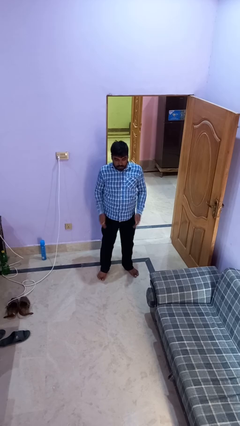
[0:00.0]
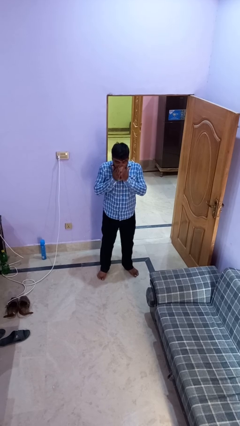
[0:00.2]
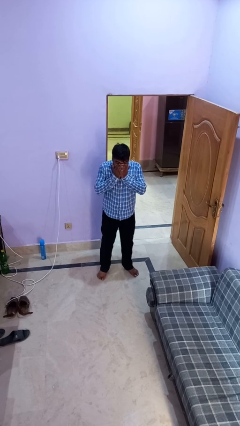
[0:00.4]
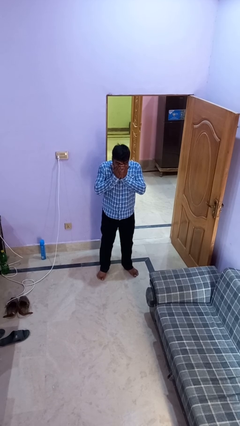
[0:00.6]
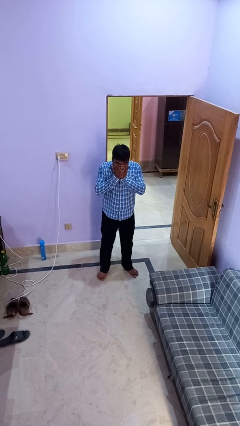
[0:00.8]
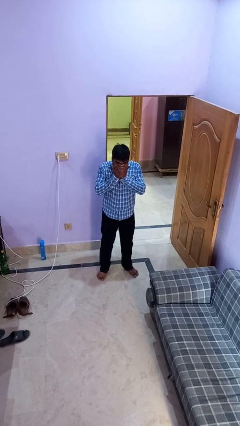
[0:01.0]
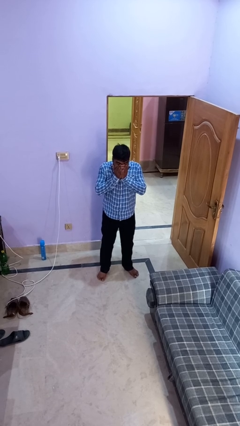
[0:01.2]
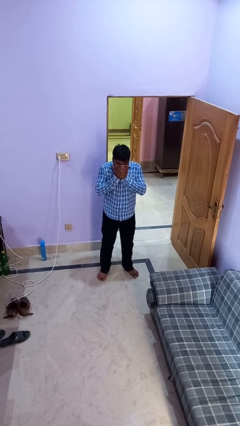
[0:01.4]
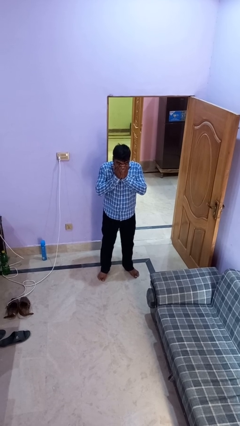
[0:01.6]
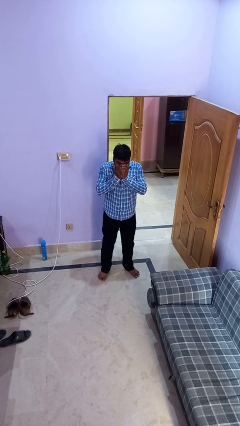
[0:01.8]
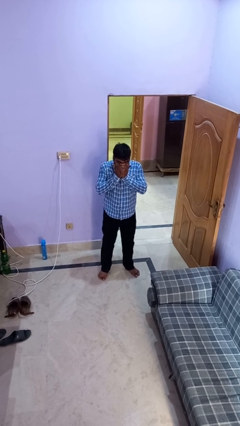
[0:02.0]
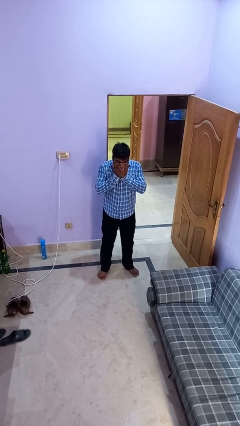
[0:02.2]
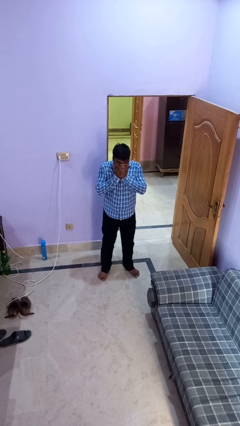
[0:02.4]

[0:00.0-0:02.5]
person sneezes into hand

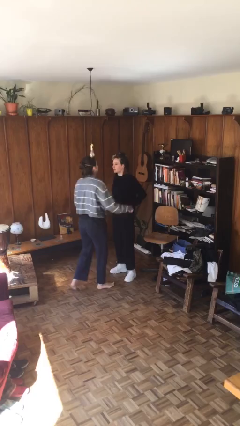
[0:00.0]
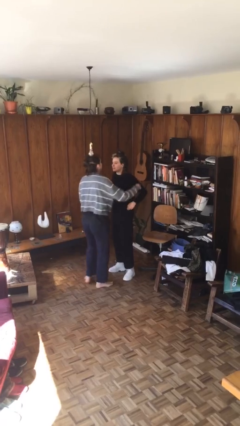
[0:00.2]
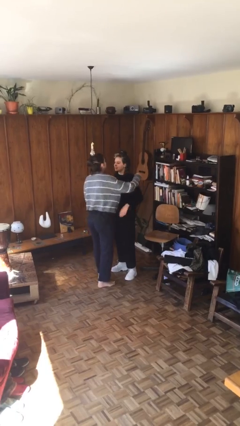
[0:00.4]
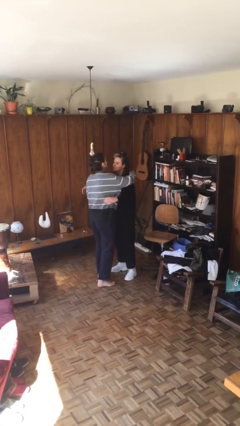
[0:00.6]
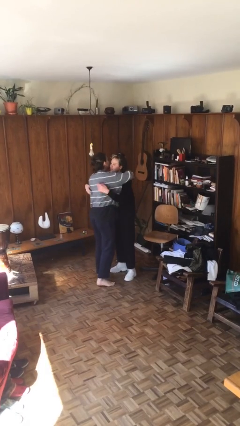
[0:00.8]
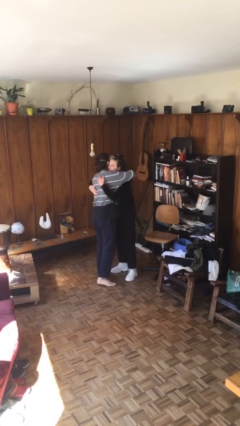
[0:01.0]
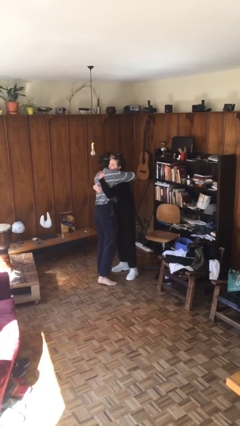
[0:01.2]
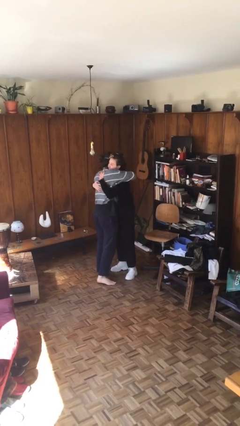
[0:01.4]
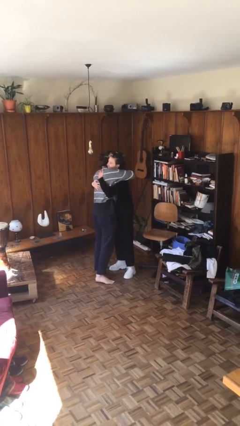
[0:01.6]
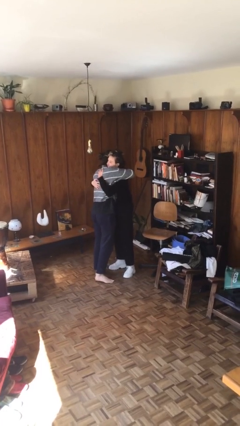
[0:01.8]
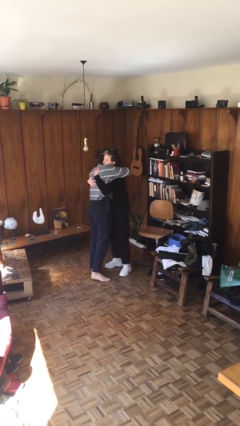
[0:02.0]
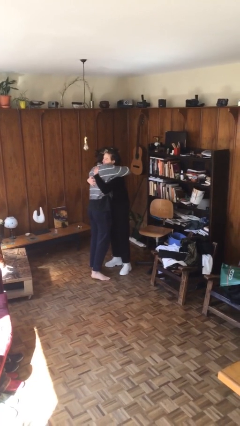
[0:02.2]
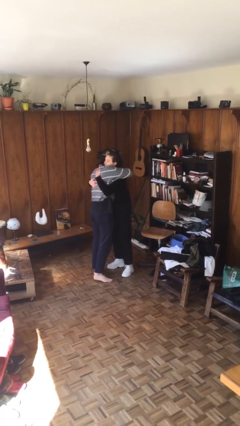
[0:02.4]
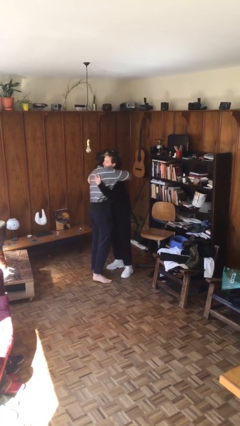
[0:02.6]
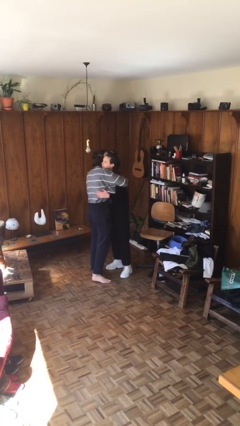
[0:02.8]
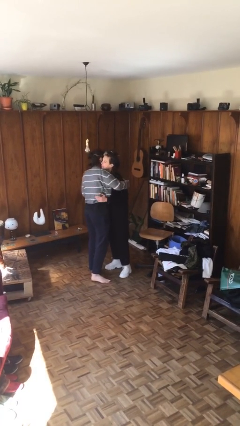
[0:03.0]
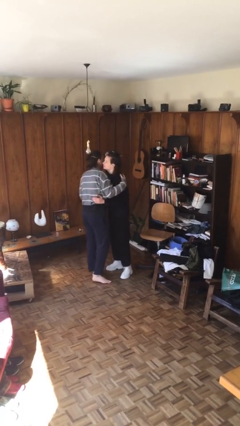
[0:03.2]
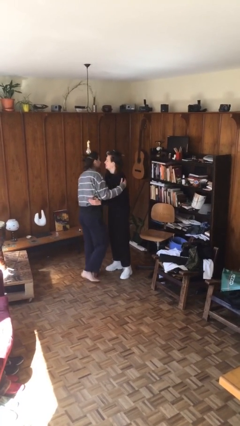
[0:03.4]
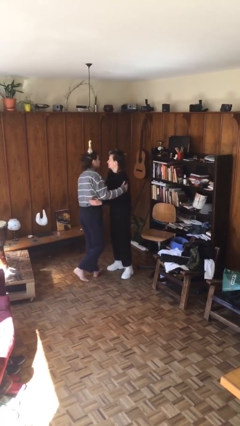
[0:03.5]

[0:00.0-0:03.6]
person embraces person

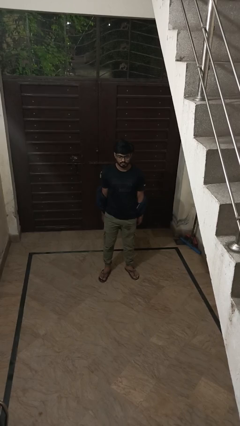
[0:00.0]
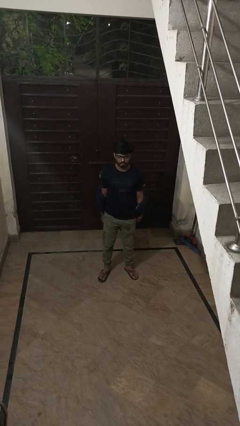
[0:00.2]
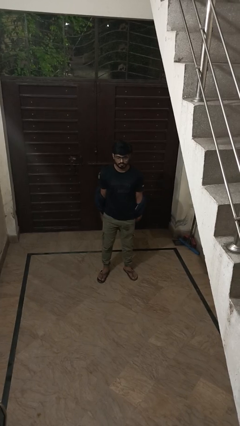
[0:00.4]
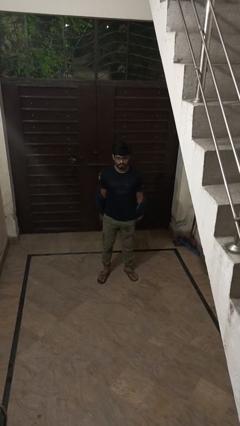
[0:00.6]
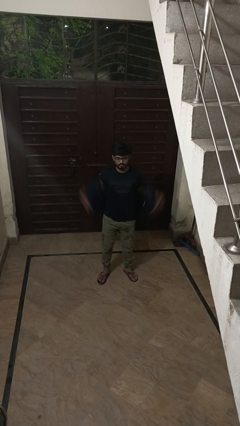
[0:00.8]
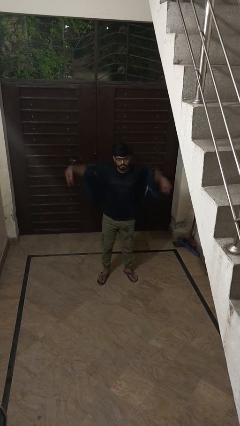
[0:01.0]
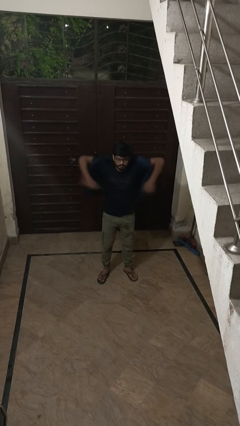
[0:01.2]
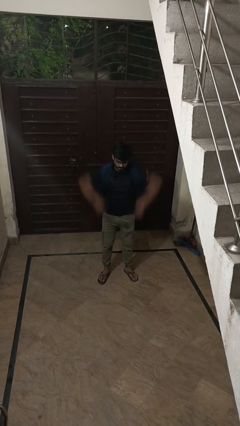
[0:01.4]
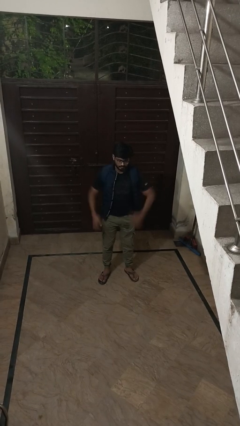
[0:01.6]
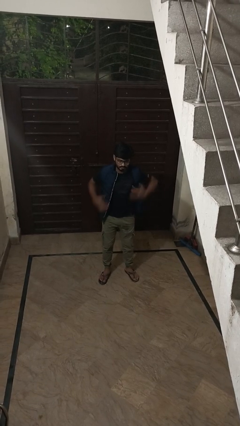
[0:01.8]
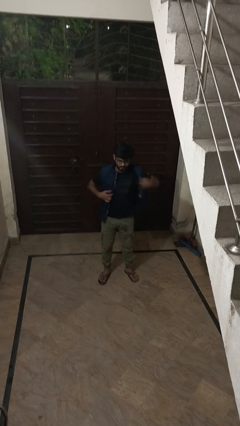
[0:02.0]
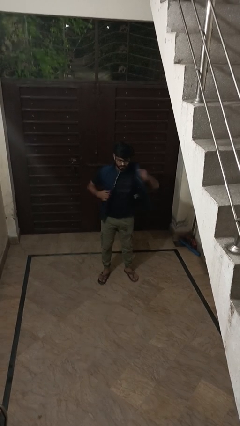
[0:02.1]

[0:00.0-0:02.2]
person puts on jacket

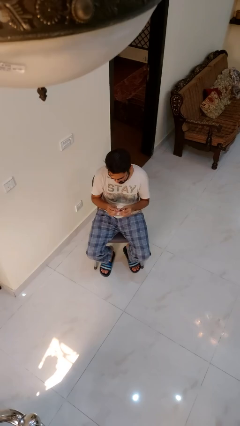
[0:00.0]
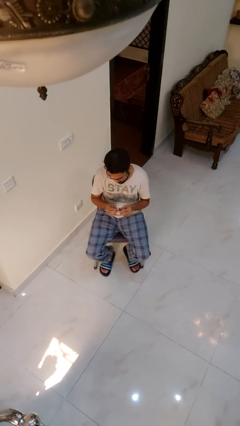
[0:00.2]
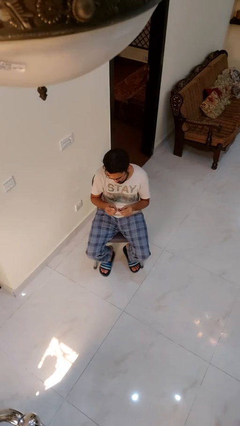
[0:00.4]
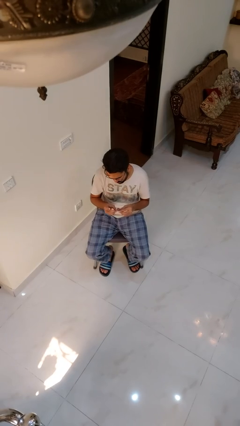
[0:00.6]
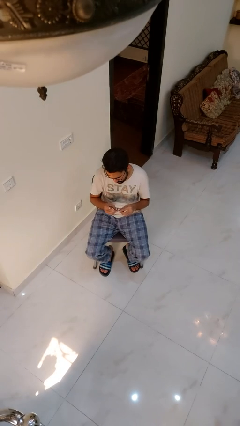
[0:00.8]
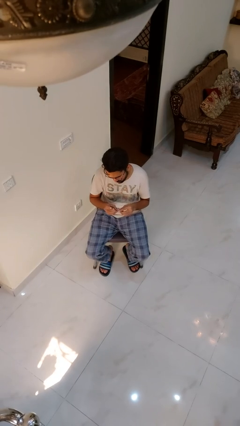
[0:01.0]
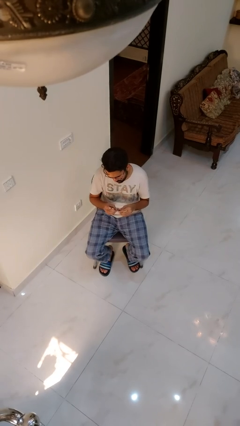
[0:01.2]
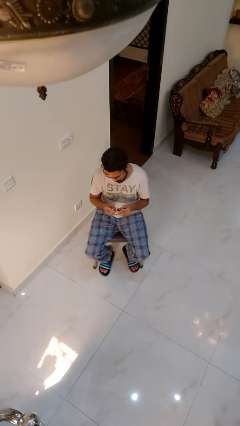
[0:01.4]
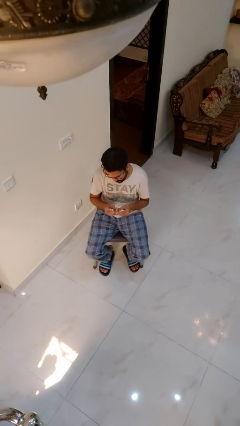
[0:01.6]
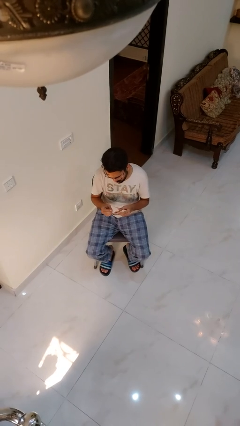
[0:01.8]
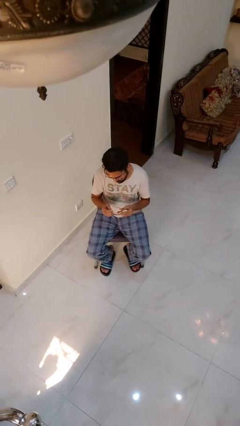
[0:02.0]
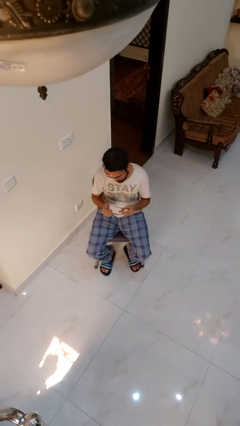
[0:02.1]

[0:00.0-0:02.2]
person files fingernails

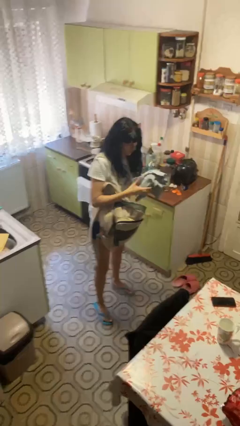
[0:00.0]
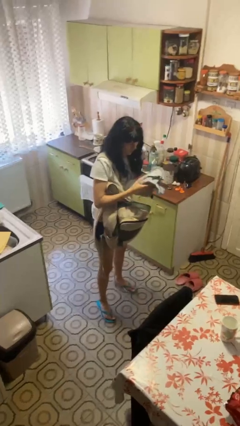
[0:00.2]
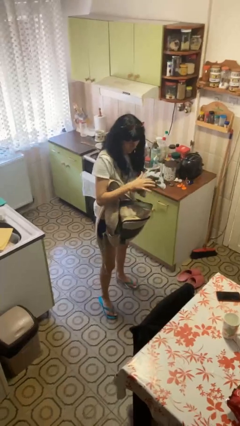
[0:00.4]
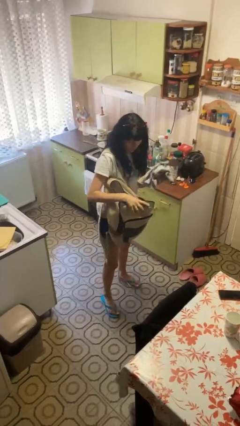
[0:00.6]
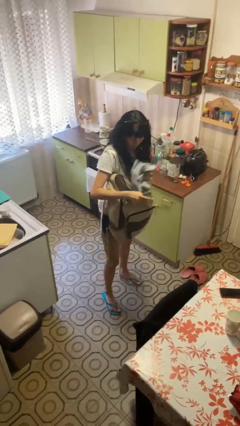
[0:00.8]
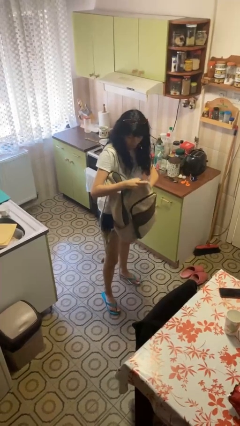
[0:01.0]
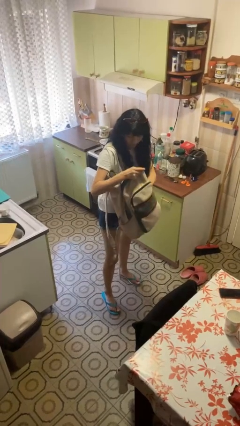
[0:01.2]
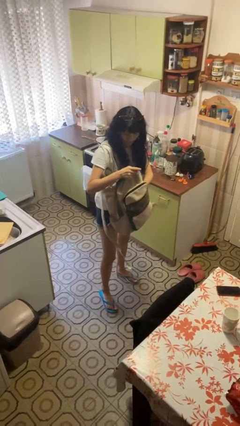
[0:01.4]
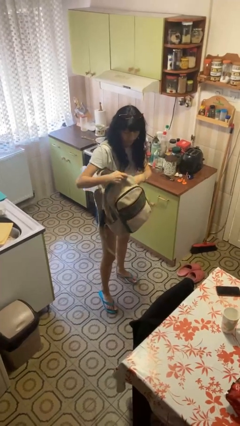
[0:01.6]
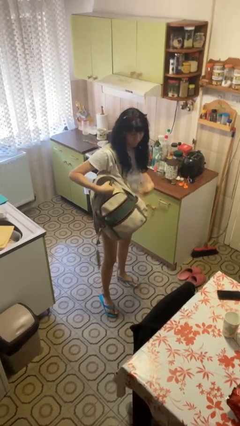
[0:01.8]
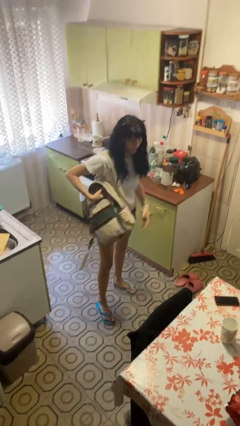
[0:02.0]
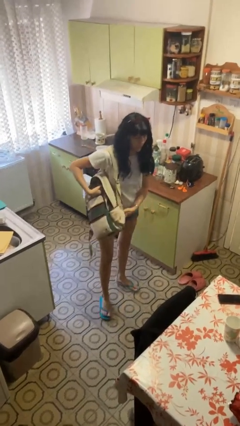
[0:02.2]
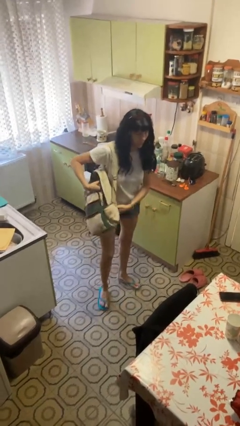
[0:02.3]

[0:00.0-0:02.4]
person puts object into backpack

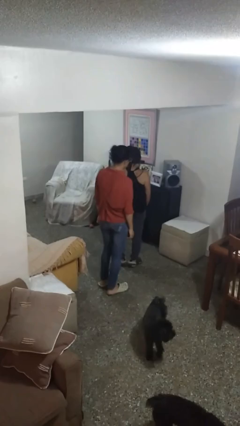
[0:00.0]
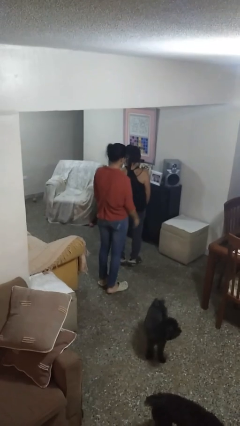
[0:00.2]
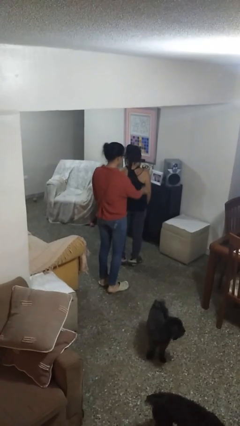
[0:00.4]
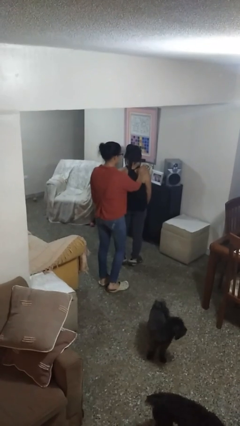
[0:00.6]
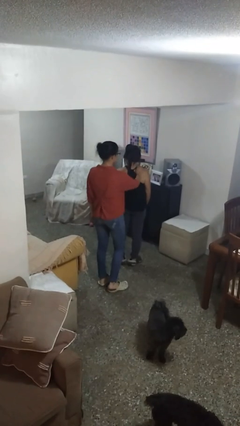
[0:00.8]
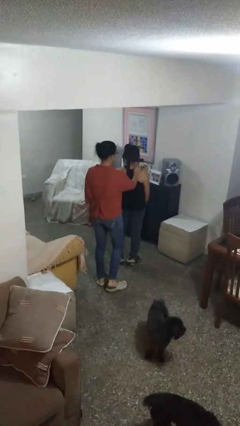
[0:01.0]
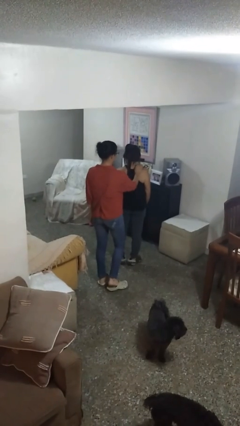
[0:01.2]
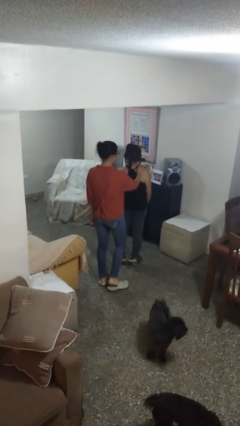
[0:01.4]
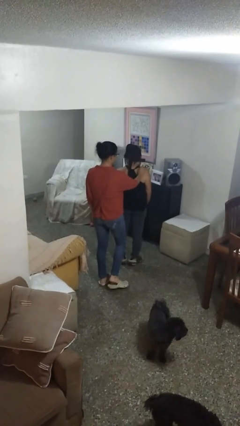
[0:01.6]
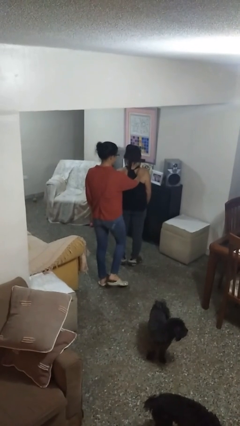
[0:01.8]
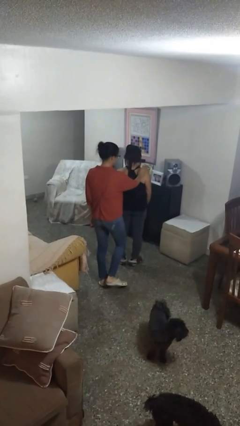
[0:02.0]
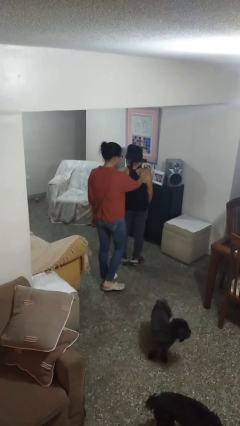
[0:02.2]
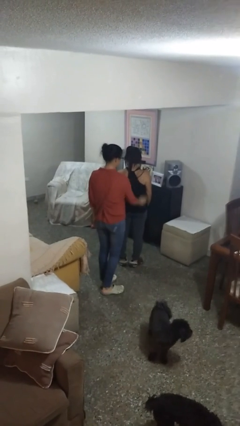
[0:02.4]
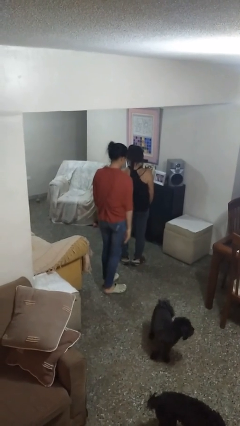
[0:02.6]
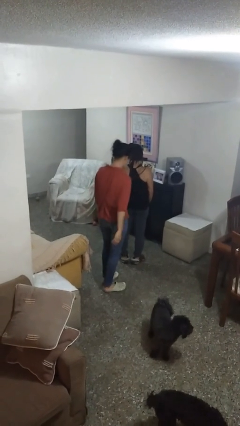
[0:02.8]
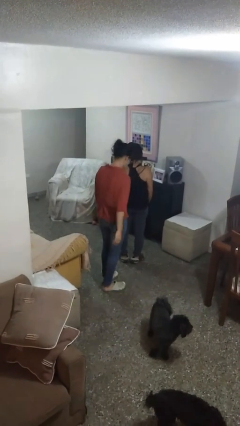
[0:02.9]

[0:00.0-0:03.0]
person touches back of person

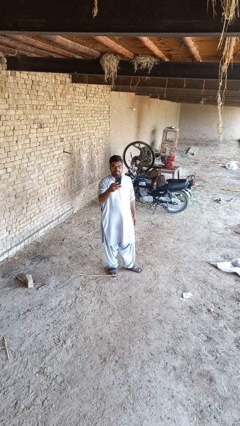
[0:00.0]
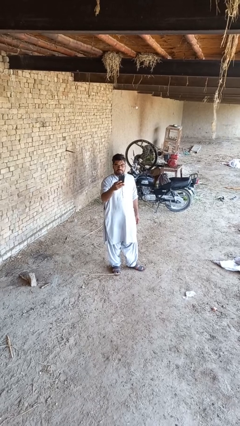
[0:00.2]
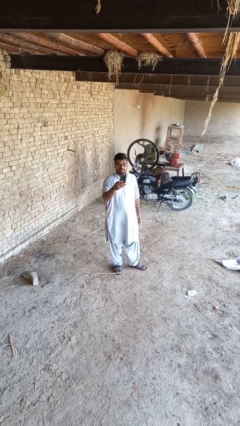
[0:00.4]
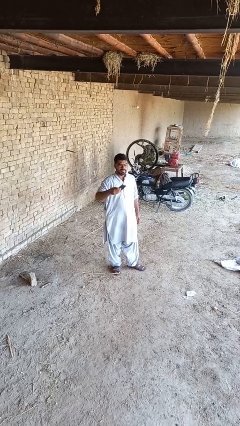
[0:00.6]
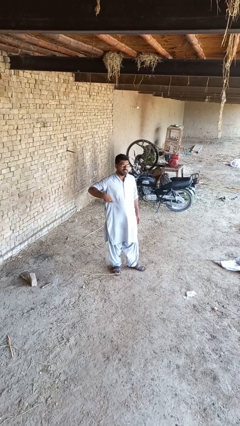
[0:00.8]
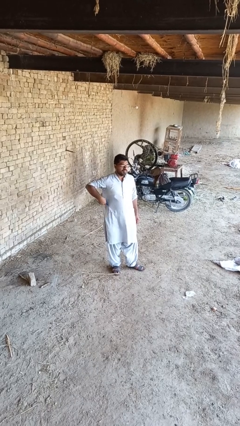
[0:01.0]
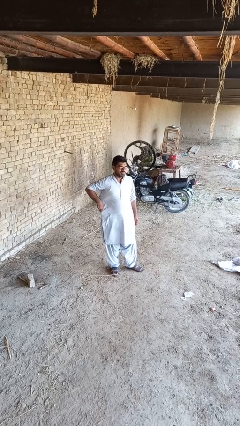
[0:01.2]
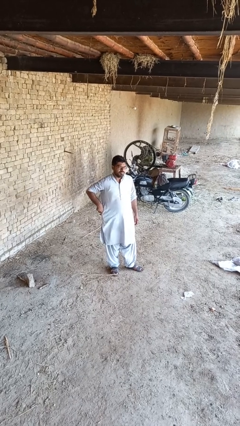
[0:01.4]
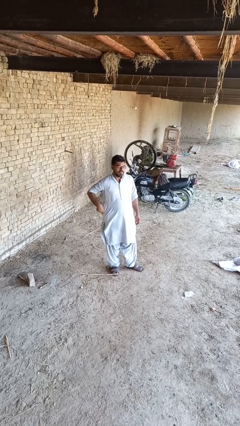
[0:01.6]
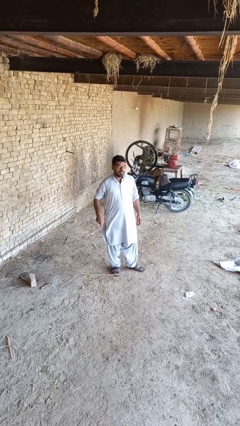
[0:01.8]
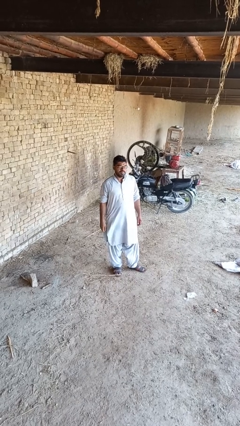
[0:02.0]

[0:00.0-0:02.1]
person puts phone into pocket
